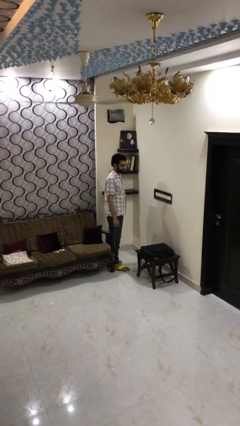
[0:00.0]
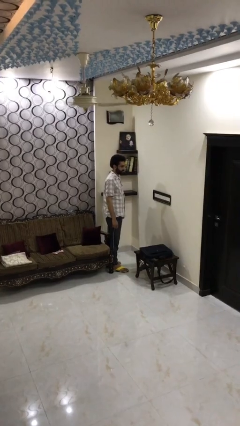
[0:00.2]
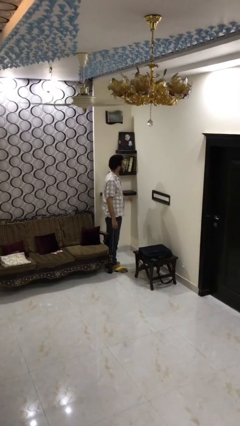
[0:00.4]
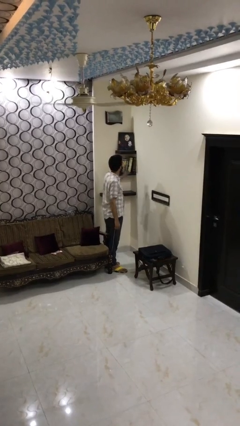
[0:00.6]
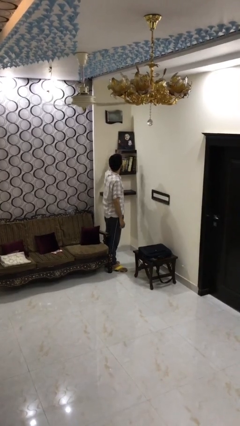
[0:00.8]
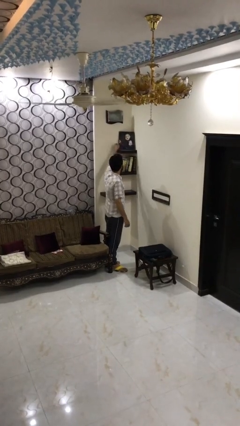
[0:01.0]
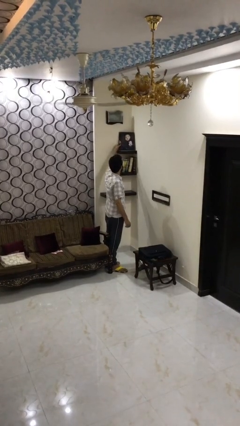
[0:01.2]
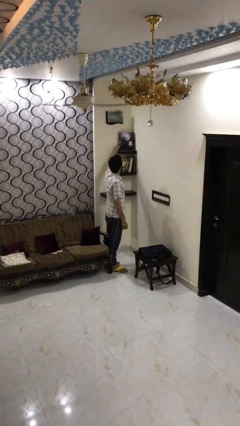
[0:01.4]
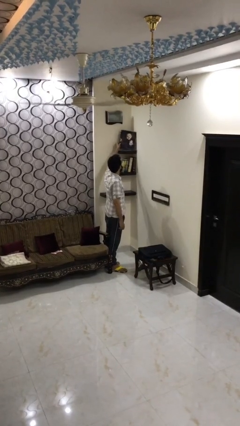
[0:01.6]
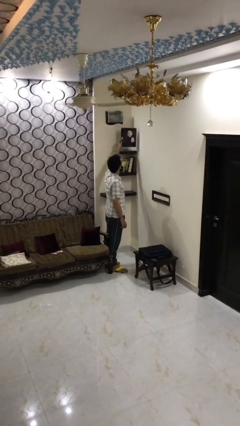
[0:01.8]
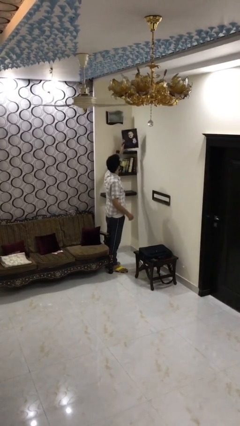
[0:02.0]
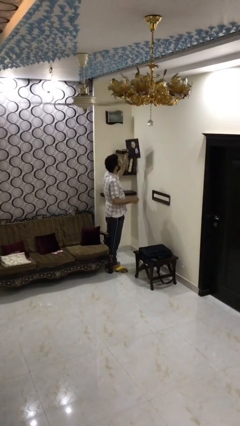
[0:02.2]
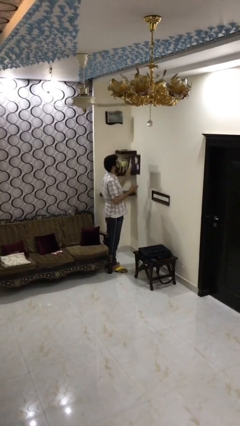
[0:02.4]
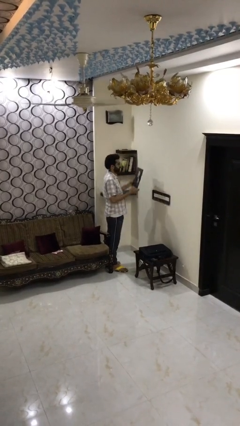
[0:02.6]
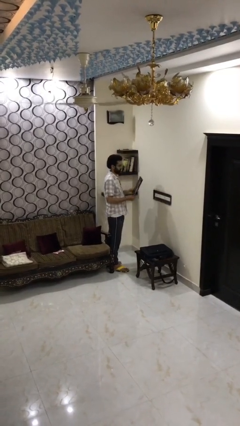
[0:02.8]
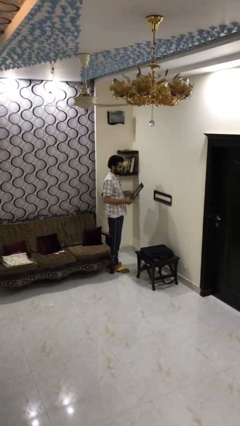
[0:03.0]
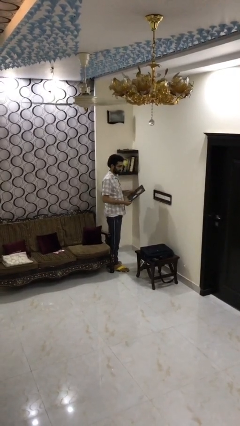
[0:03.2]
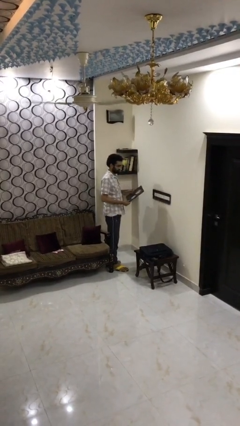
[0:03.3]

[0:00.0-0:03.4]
person picks up object from shelf

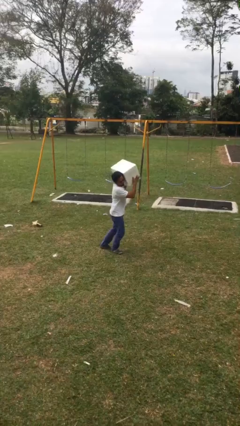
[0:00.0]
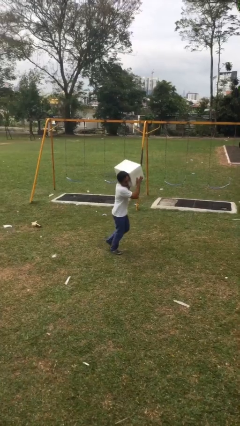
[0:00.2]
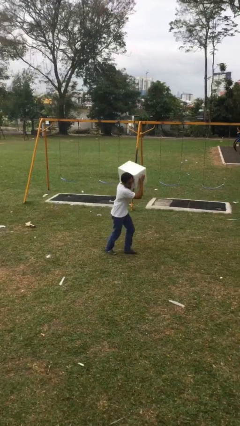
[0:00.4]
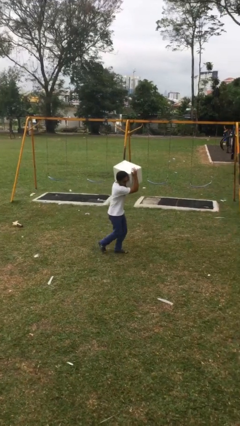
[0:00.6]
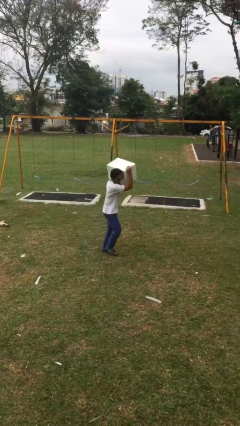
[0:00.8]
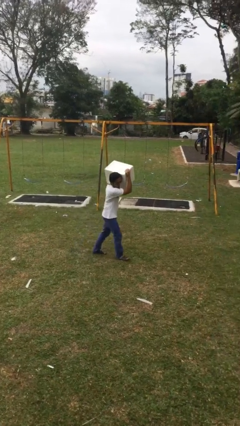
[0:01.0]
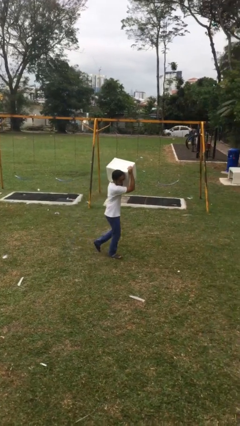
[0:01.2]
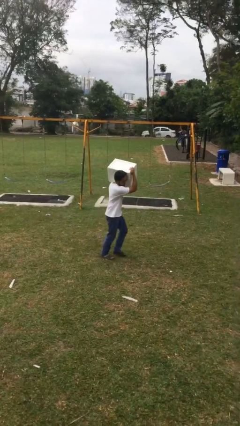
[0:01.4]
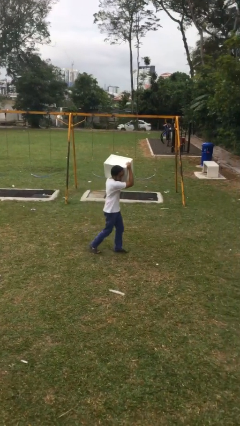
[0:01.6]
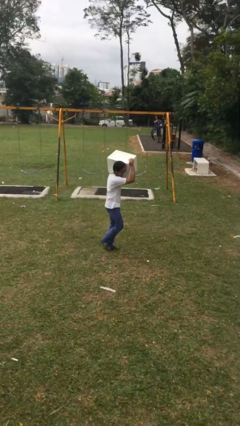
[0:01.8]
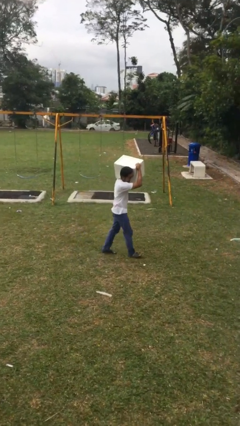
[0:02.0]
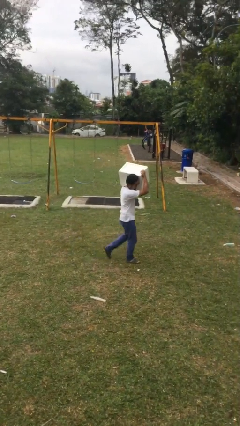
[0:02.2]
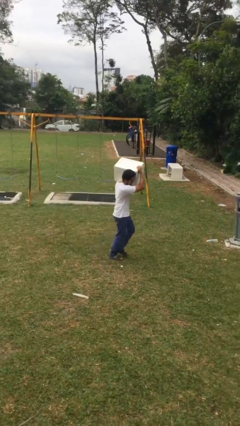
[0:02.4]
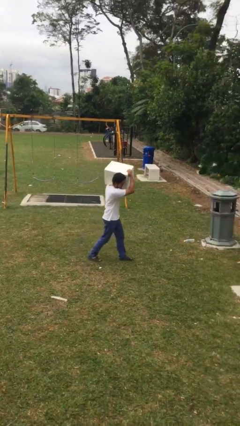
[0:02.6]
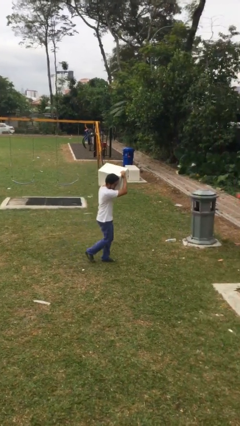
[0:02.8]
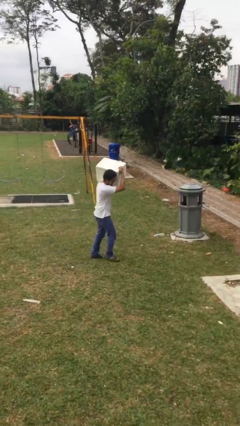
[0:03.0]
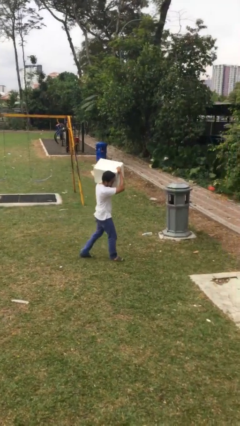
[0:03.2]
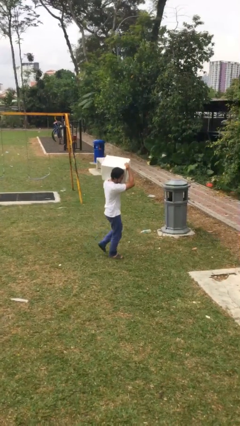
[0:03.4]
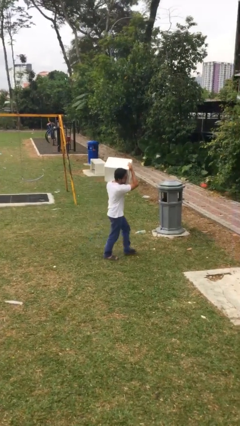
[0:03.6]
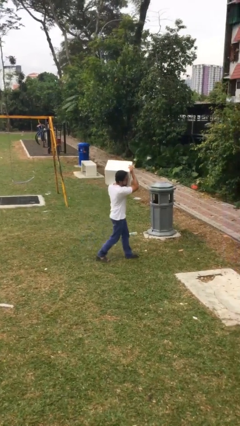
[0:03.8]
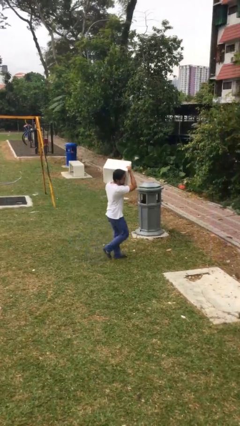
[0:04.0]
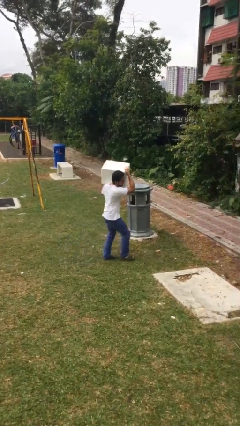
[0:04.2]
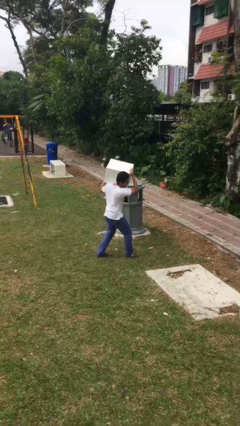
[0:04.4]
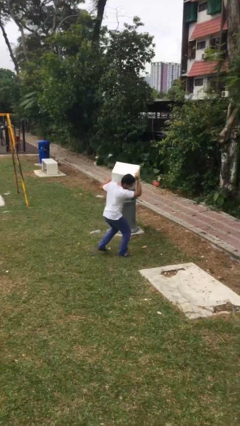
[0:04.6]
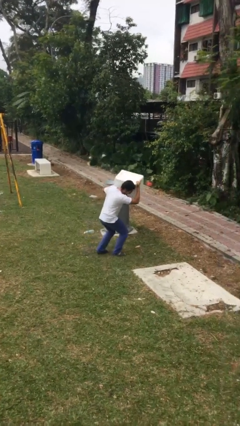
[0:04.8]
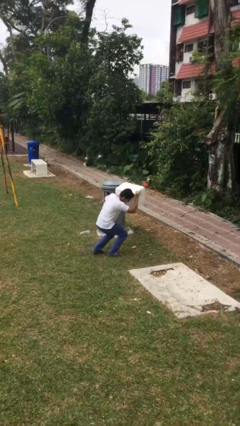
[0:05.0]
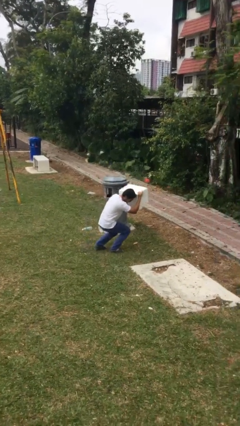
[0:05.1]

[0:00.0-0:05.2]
person carries heavy object

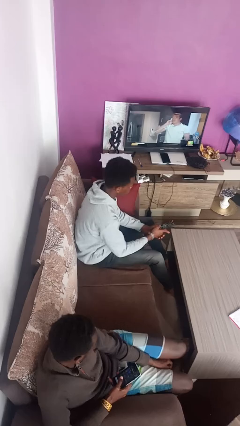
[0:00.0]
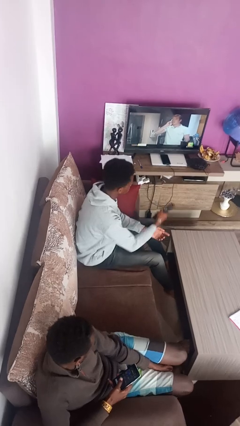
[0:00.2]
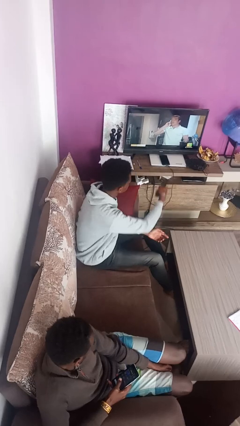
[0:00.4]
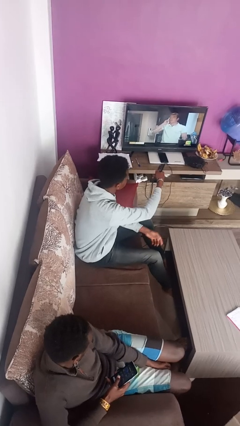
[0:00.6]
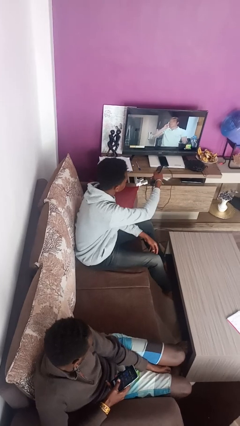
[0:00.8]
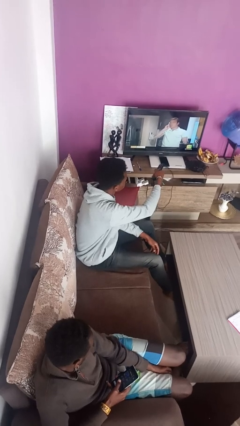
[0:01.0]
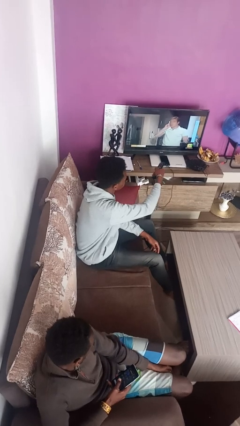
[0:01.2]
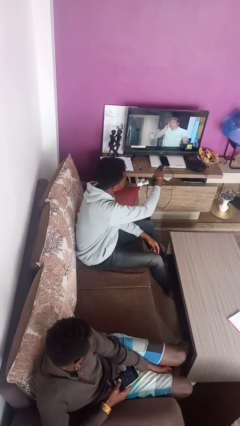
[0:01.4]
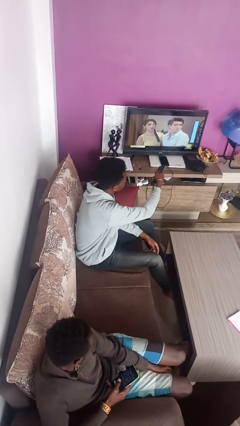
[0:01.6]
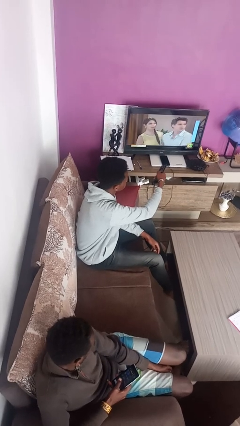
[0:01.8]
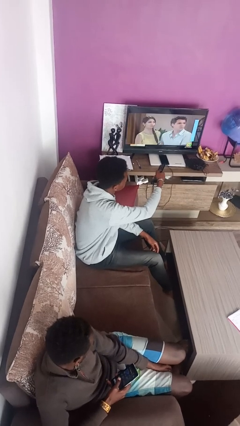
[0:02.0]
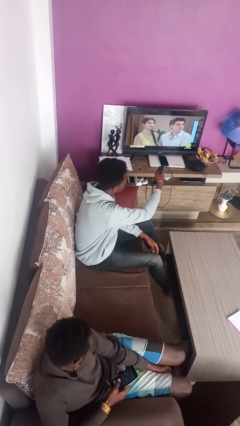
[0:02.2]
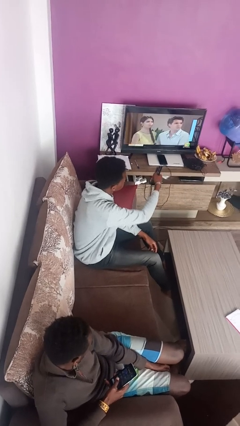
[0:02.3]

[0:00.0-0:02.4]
person uses television remote

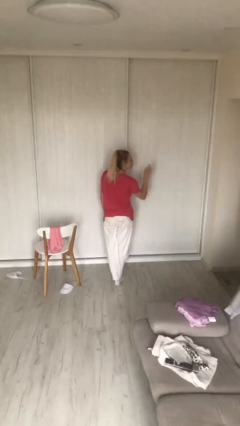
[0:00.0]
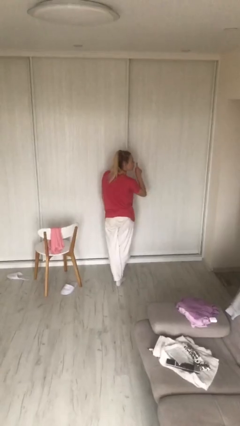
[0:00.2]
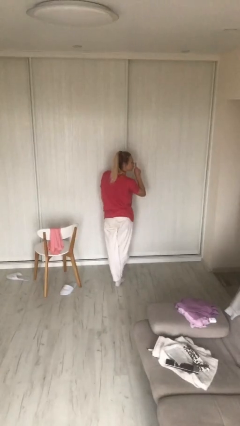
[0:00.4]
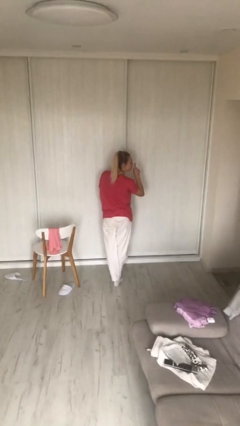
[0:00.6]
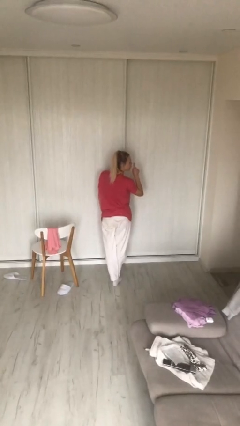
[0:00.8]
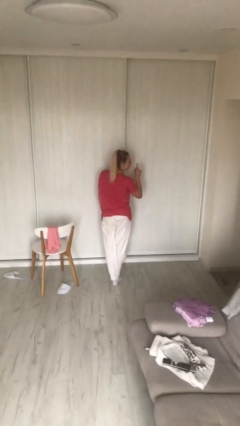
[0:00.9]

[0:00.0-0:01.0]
person gestures be quiet

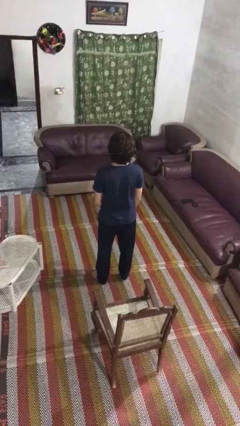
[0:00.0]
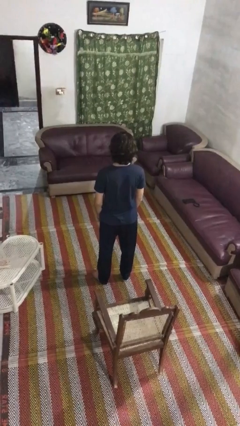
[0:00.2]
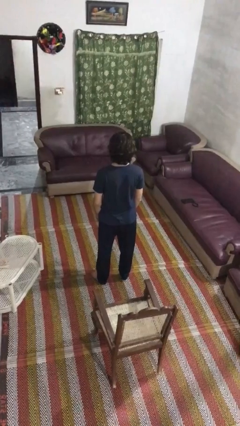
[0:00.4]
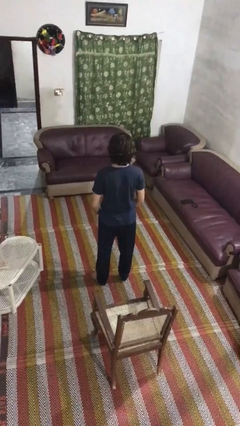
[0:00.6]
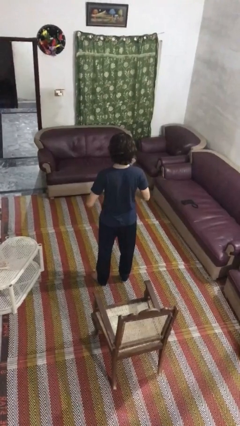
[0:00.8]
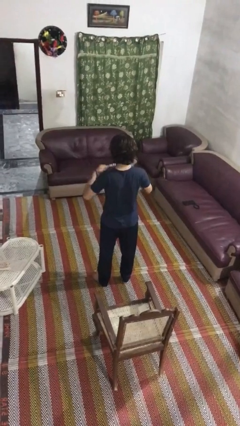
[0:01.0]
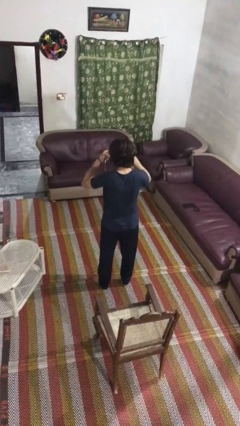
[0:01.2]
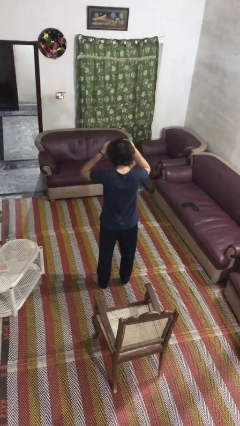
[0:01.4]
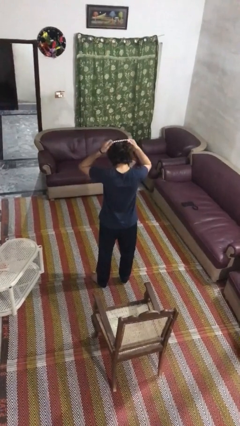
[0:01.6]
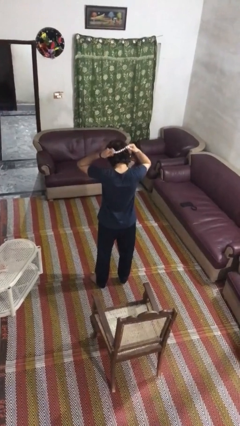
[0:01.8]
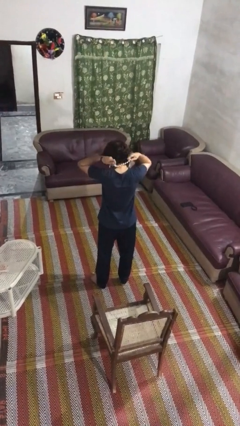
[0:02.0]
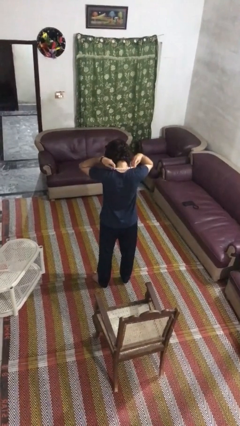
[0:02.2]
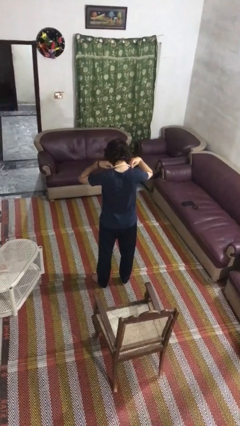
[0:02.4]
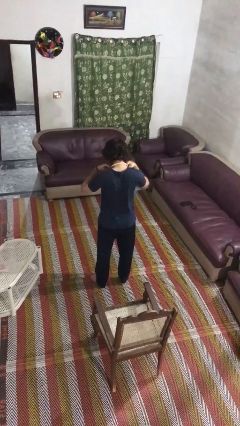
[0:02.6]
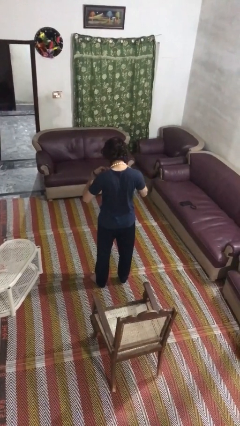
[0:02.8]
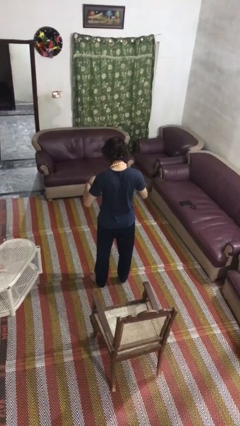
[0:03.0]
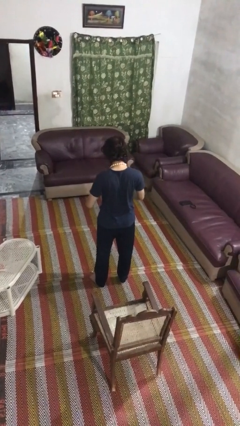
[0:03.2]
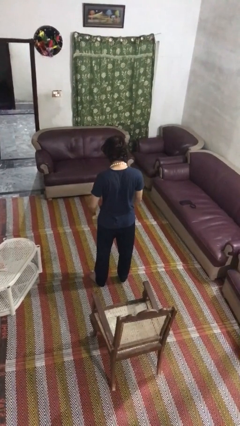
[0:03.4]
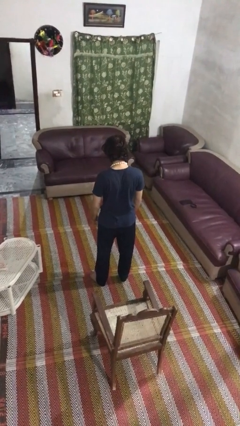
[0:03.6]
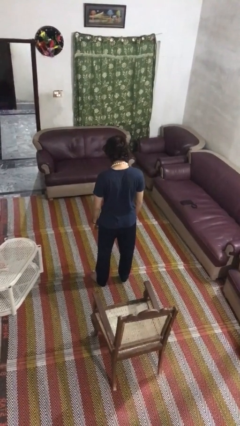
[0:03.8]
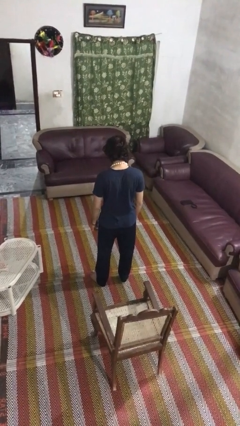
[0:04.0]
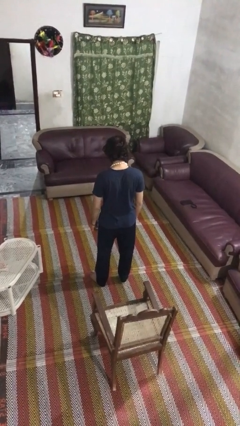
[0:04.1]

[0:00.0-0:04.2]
person puts on necklace

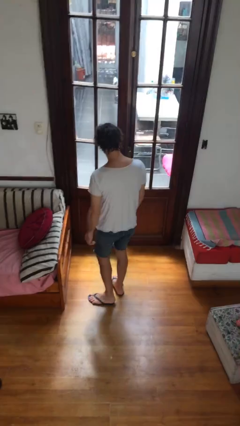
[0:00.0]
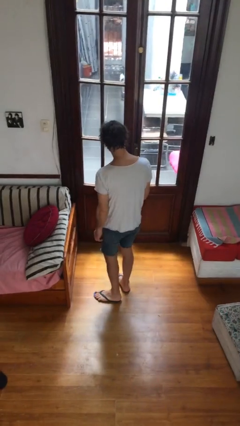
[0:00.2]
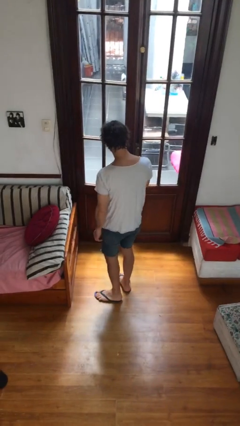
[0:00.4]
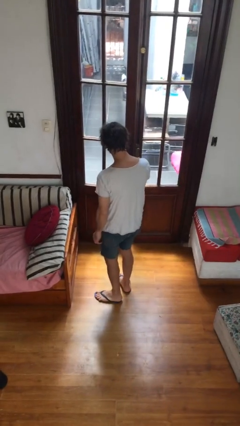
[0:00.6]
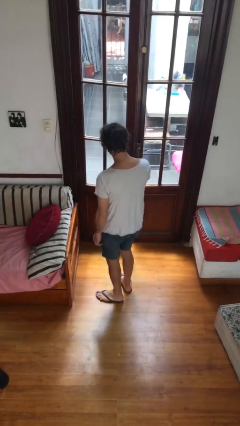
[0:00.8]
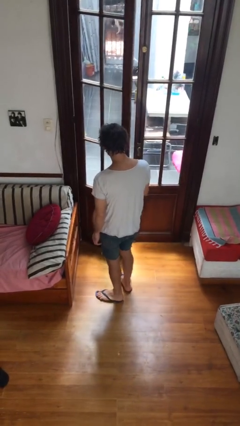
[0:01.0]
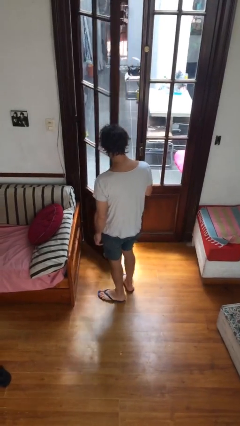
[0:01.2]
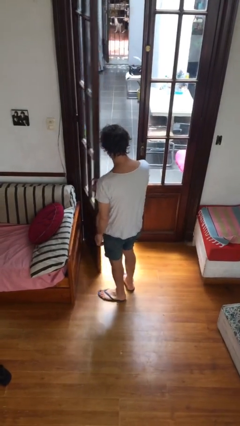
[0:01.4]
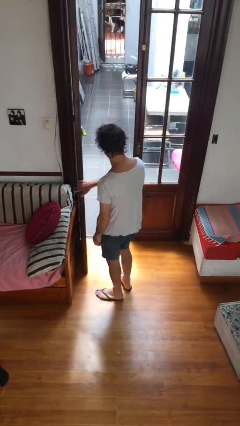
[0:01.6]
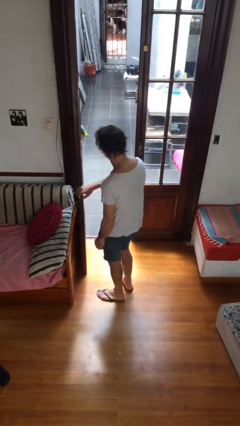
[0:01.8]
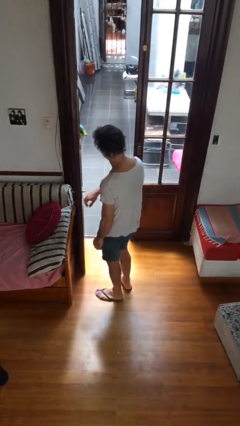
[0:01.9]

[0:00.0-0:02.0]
person opens facility door
